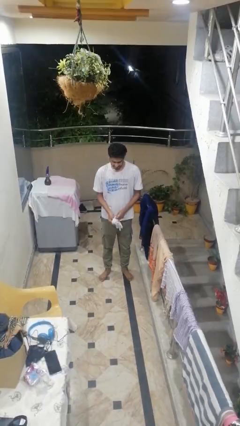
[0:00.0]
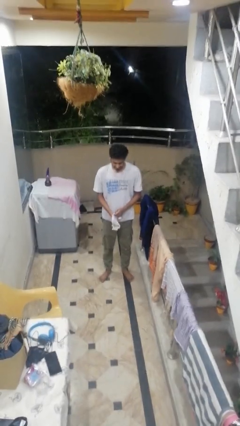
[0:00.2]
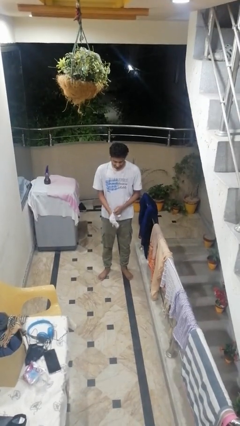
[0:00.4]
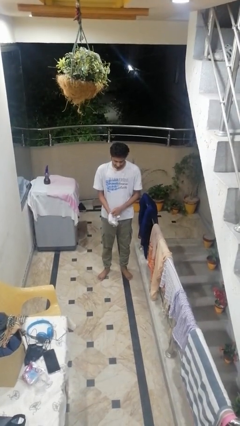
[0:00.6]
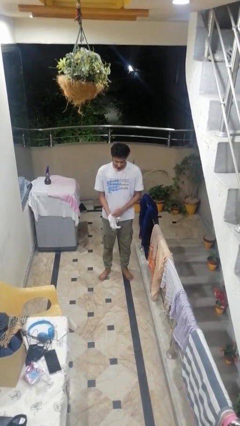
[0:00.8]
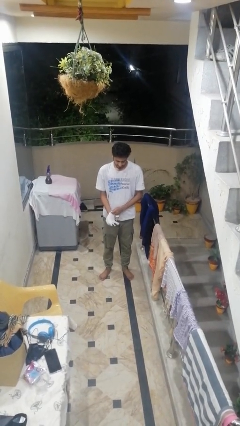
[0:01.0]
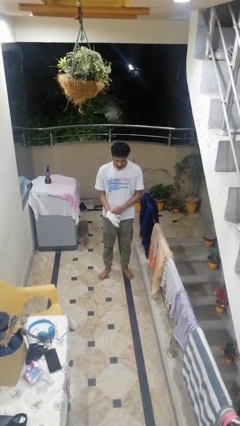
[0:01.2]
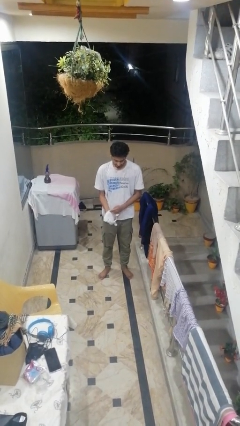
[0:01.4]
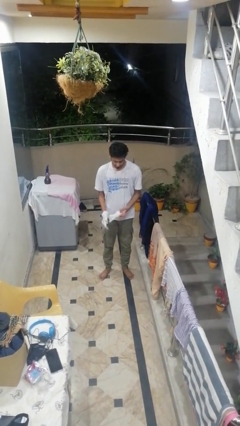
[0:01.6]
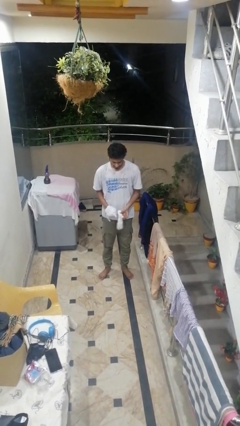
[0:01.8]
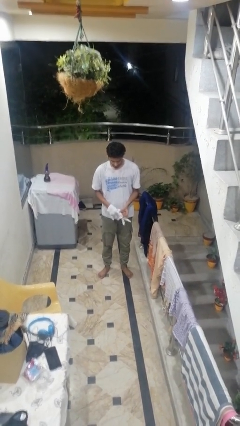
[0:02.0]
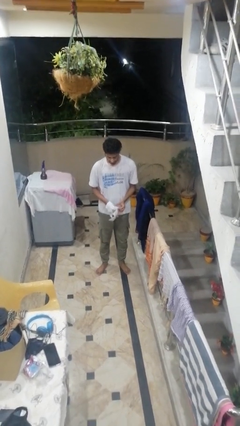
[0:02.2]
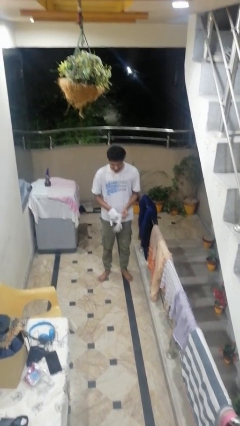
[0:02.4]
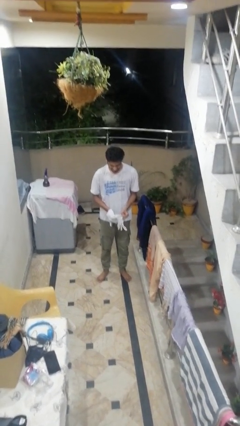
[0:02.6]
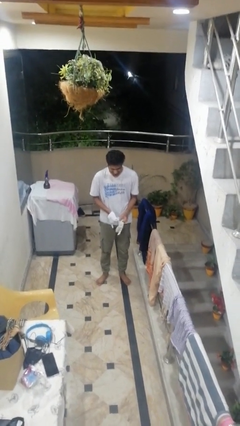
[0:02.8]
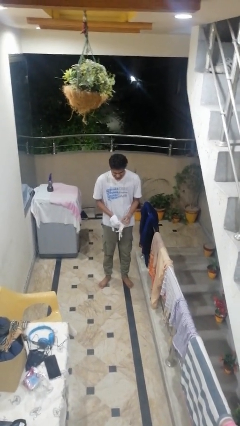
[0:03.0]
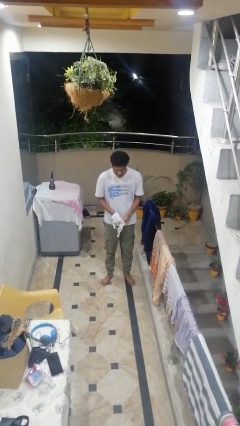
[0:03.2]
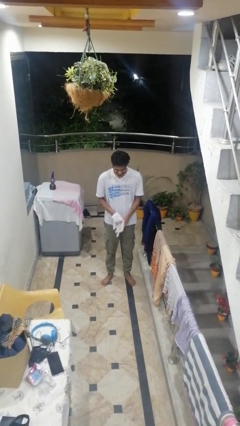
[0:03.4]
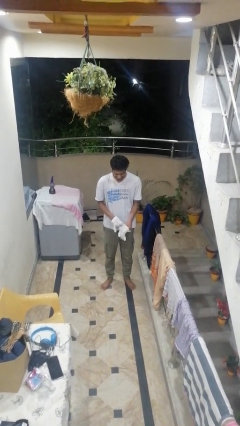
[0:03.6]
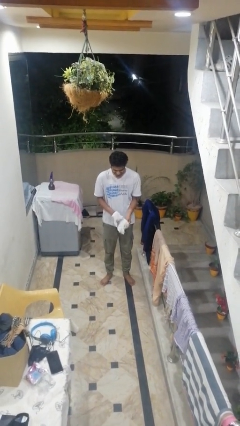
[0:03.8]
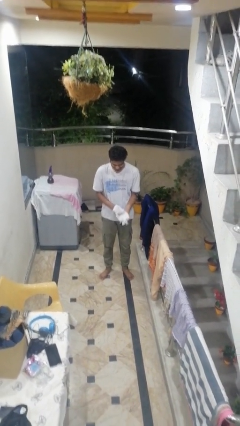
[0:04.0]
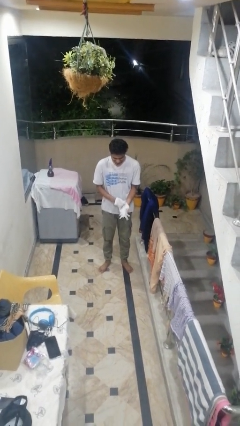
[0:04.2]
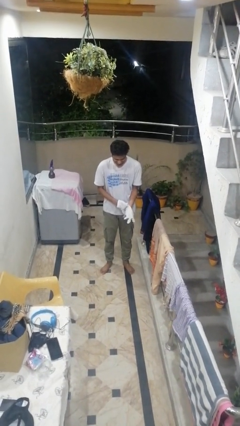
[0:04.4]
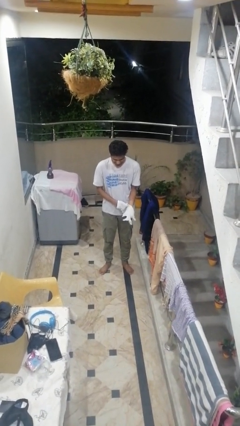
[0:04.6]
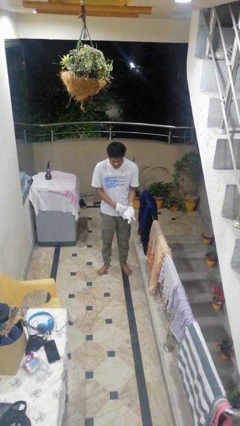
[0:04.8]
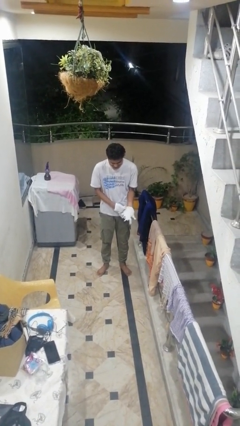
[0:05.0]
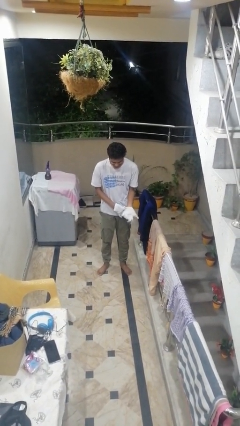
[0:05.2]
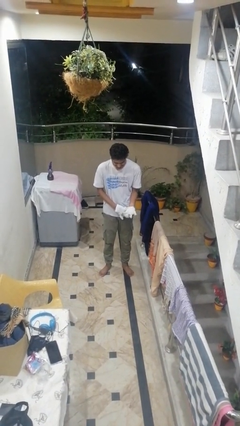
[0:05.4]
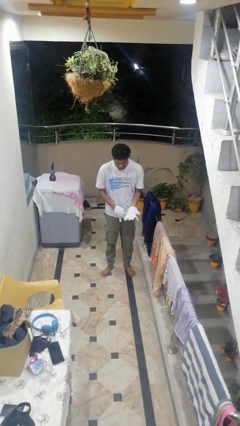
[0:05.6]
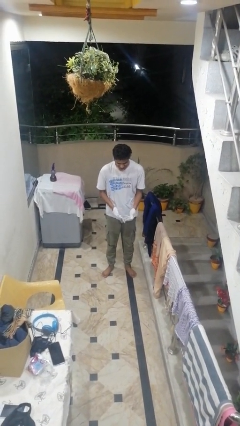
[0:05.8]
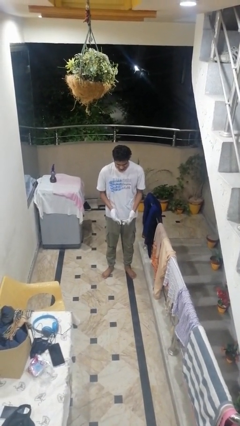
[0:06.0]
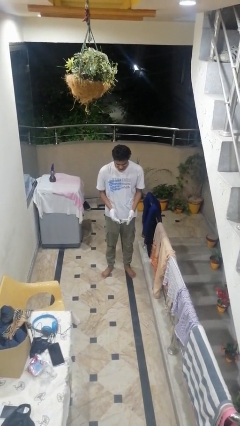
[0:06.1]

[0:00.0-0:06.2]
person puts on gloves

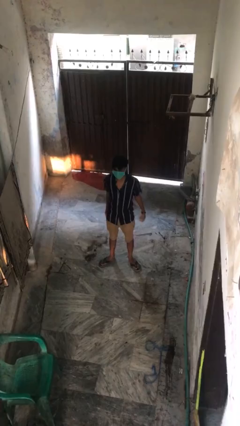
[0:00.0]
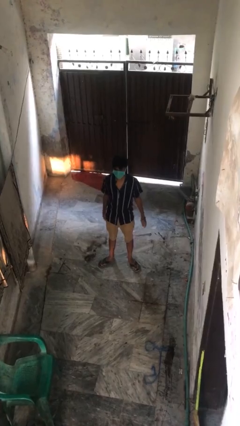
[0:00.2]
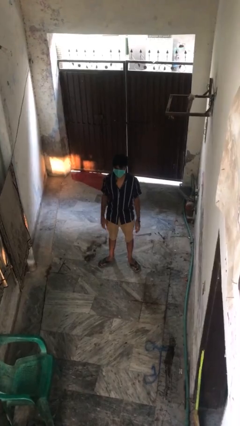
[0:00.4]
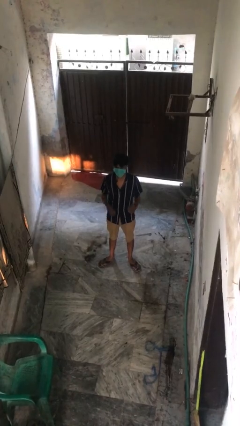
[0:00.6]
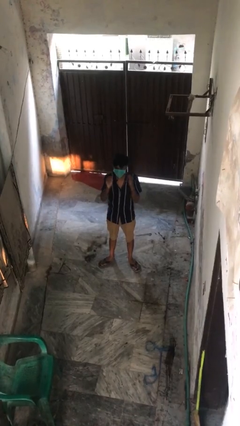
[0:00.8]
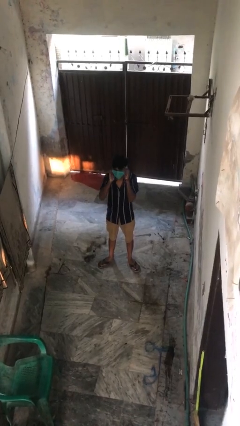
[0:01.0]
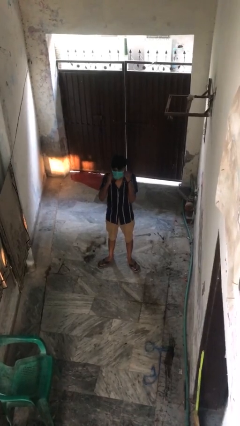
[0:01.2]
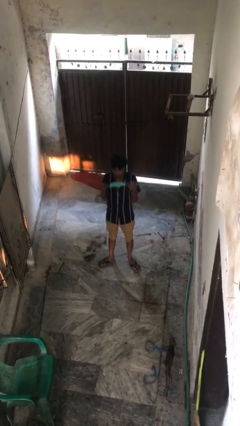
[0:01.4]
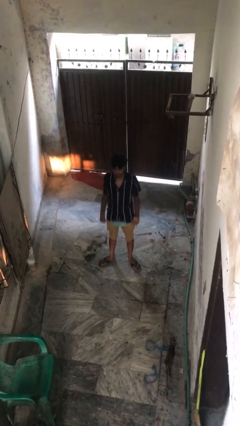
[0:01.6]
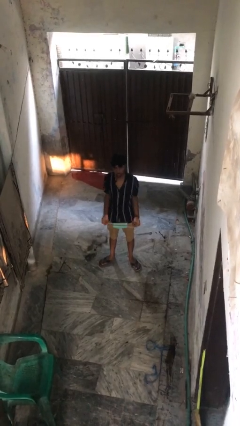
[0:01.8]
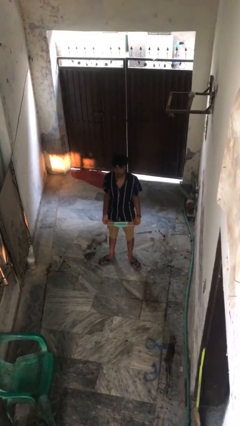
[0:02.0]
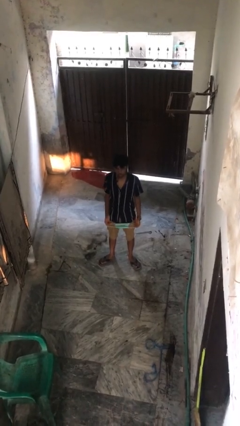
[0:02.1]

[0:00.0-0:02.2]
person takes off facemask

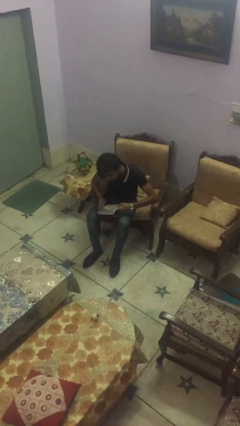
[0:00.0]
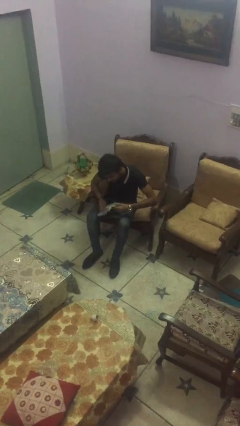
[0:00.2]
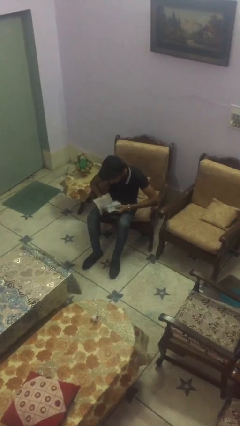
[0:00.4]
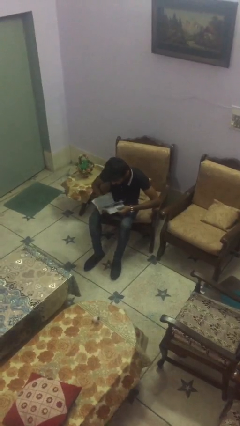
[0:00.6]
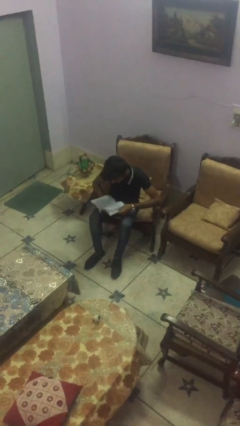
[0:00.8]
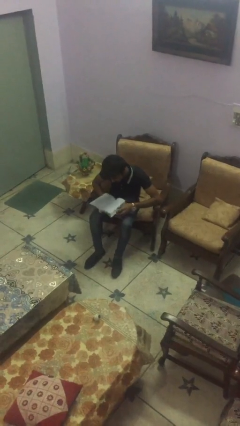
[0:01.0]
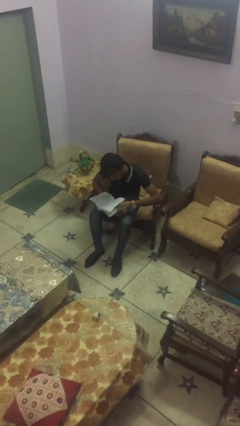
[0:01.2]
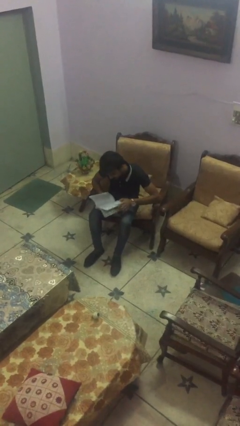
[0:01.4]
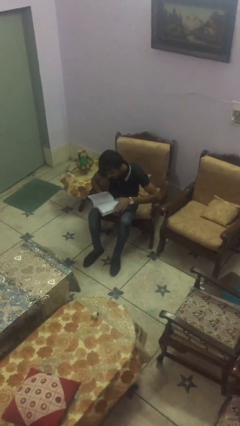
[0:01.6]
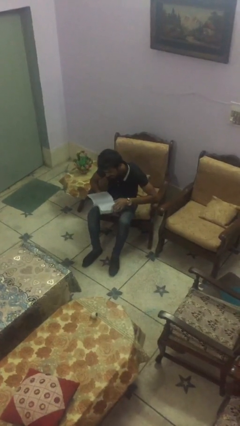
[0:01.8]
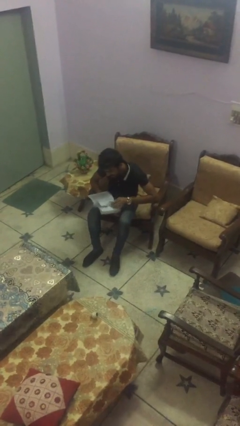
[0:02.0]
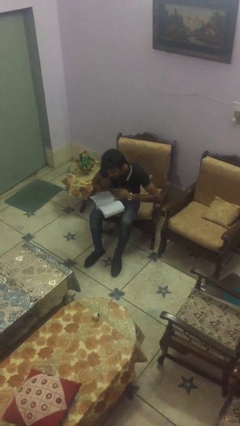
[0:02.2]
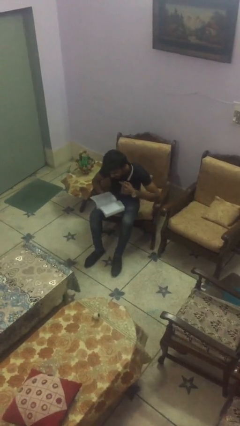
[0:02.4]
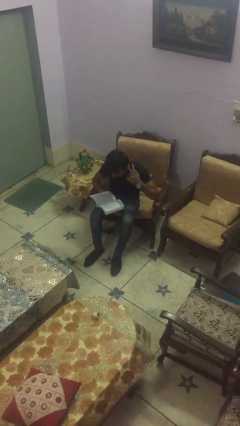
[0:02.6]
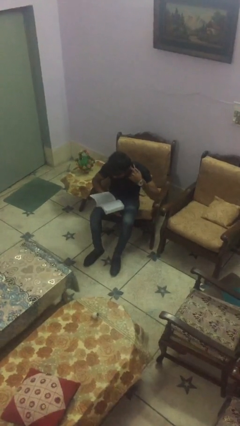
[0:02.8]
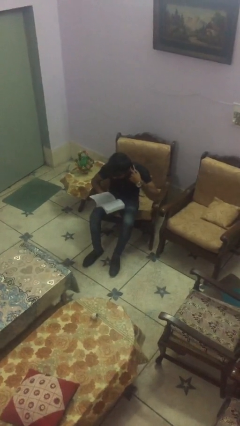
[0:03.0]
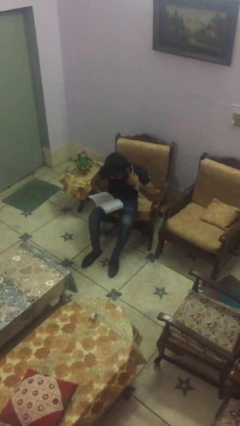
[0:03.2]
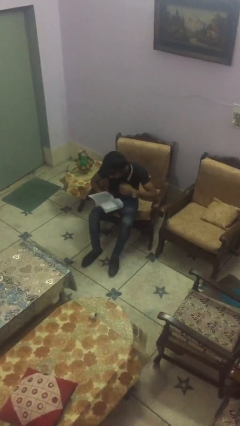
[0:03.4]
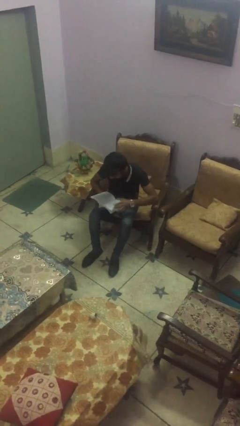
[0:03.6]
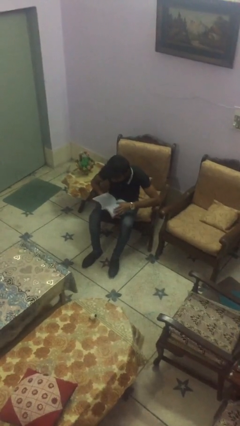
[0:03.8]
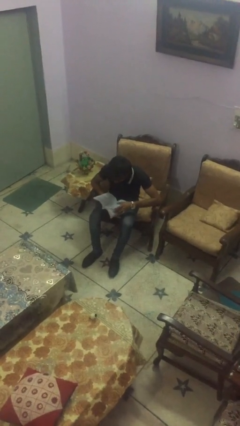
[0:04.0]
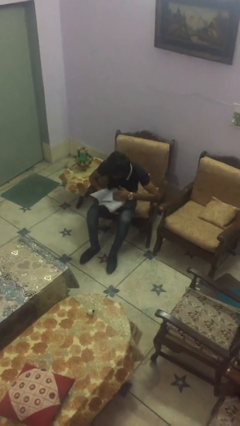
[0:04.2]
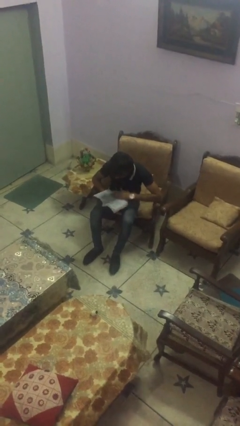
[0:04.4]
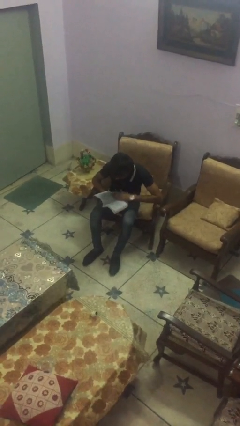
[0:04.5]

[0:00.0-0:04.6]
person reads document

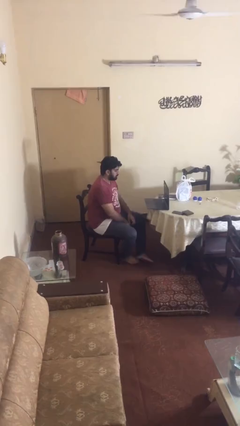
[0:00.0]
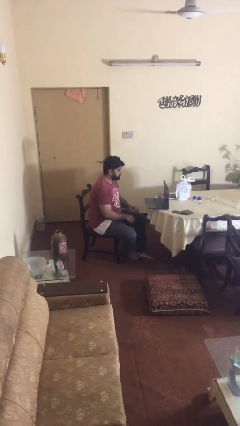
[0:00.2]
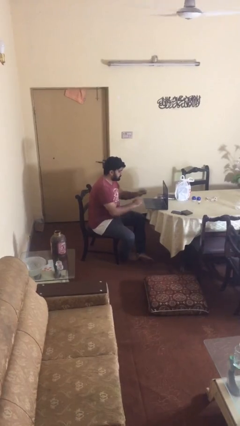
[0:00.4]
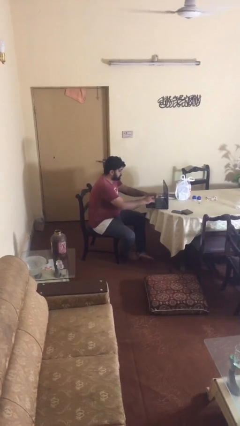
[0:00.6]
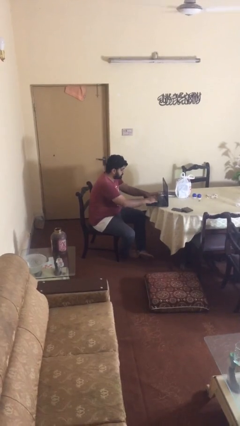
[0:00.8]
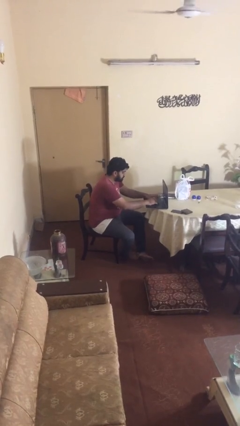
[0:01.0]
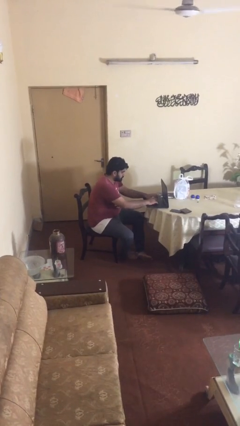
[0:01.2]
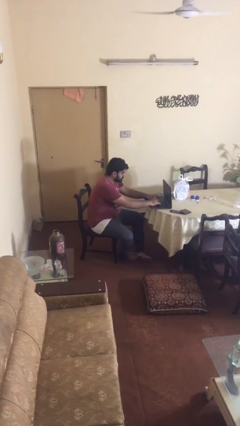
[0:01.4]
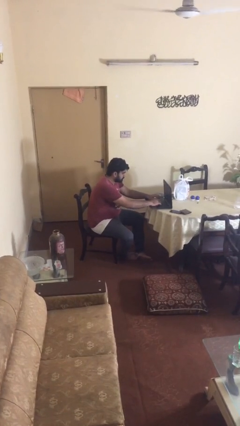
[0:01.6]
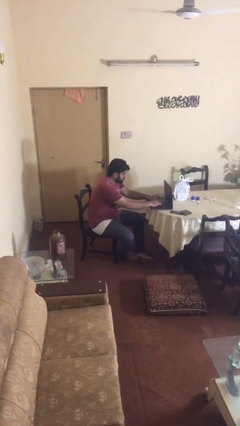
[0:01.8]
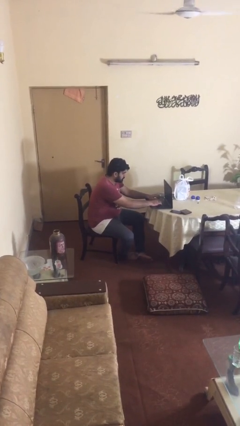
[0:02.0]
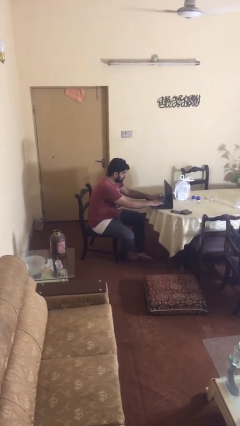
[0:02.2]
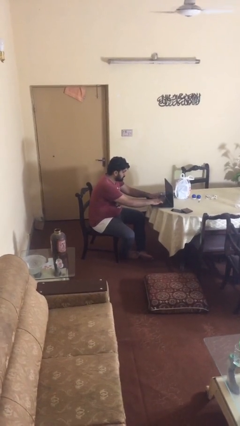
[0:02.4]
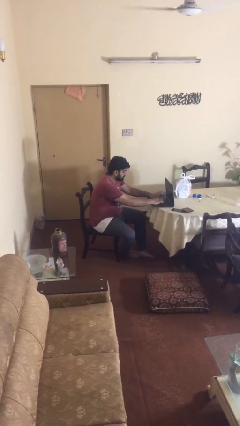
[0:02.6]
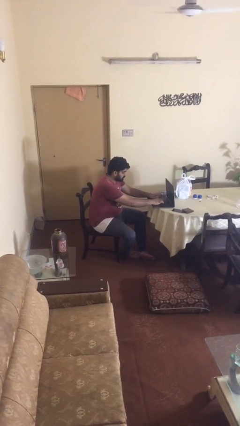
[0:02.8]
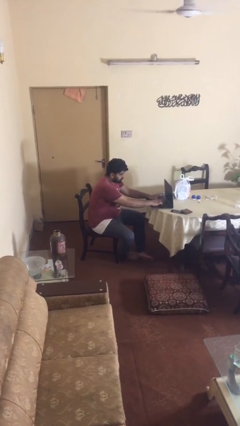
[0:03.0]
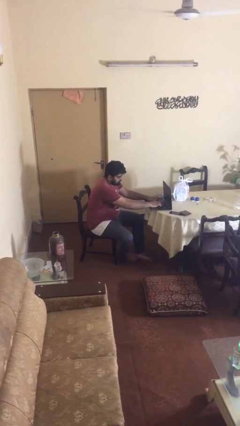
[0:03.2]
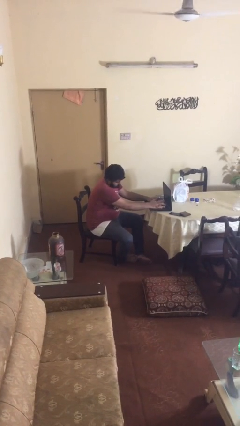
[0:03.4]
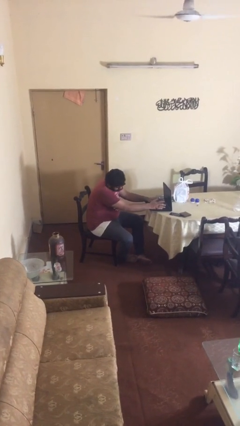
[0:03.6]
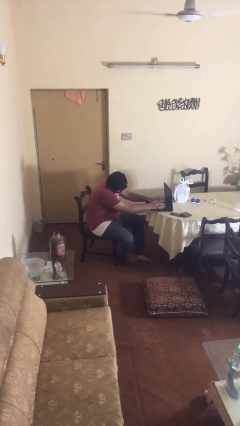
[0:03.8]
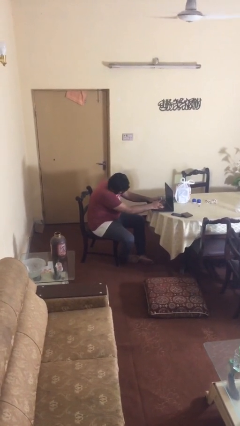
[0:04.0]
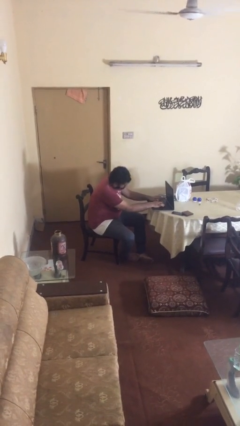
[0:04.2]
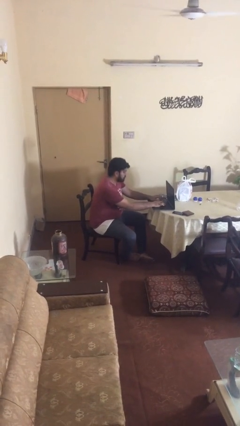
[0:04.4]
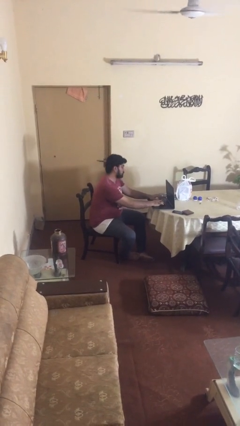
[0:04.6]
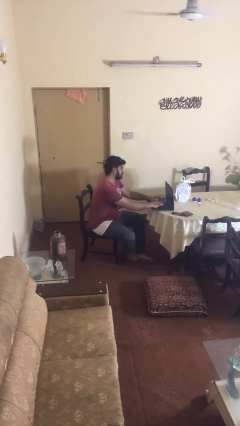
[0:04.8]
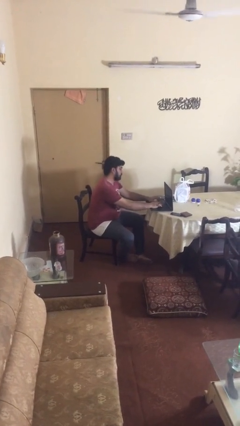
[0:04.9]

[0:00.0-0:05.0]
person interacts with laptop
